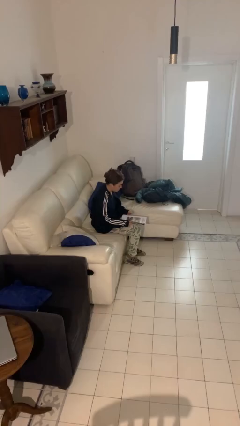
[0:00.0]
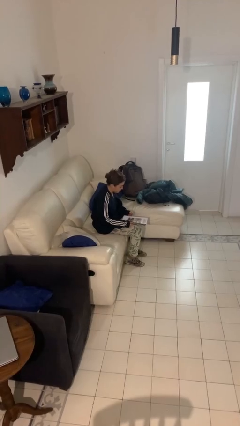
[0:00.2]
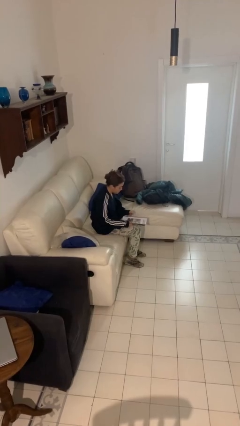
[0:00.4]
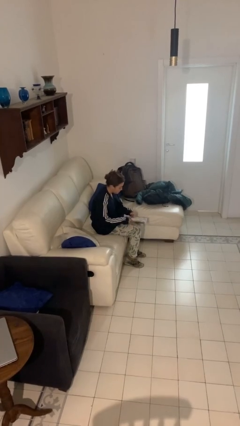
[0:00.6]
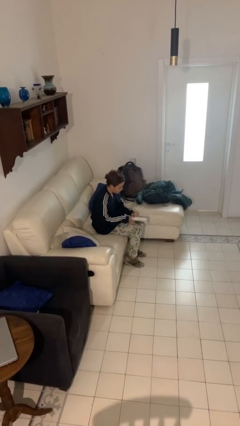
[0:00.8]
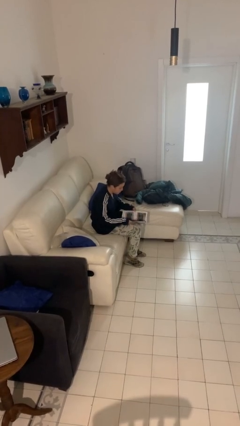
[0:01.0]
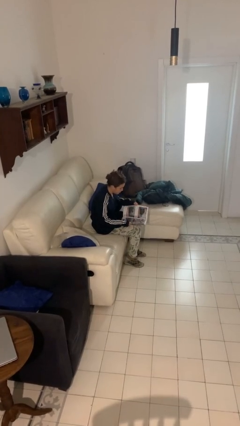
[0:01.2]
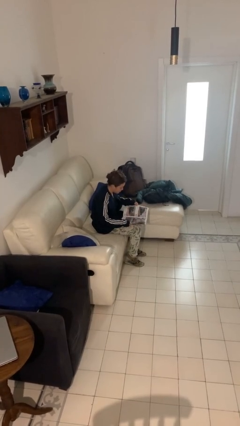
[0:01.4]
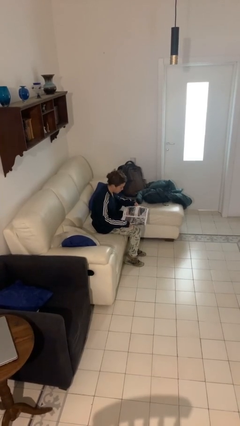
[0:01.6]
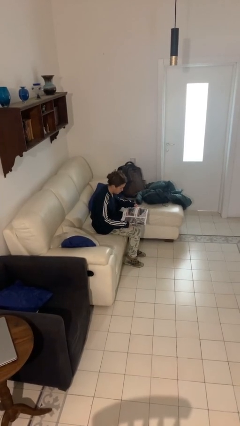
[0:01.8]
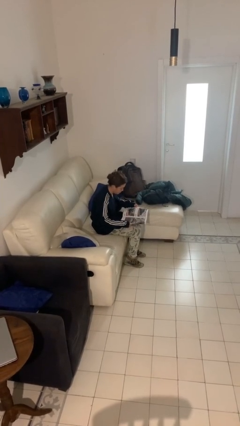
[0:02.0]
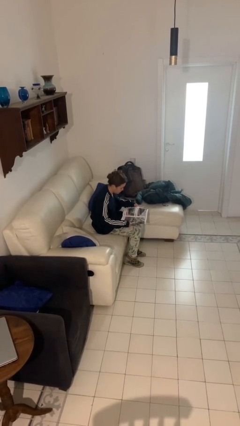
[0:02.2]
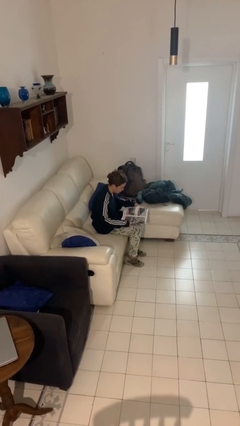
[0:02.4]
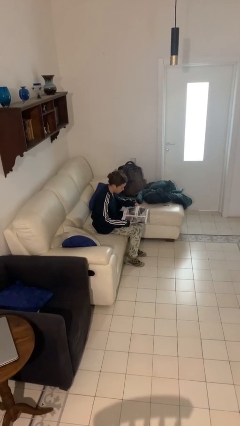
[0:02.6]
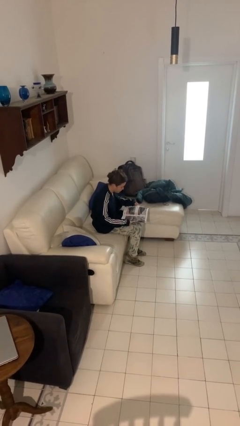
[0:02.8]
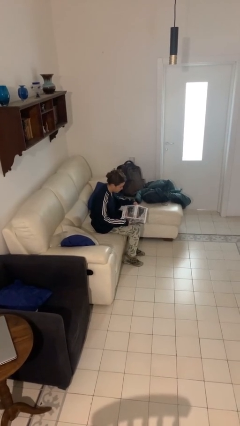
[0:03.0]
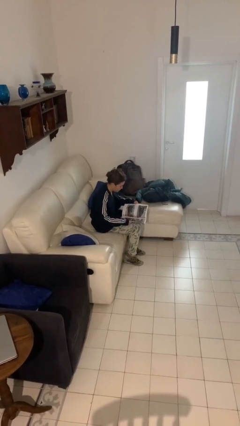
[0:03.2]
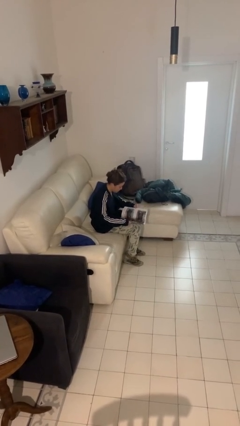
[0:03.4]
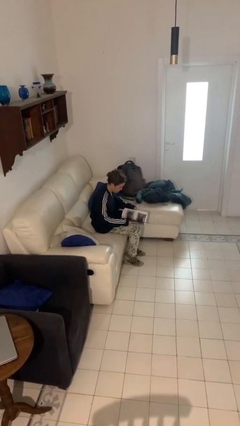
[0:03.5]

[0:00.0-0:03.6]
person reads magazine

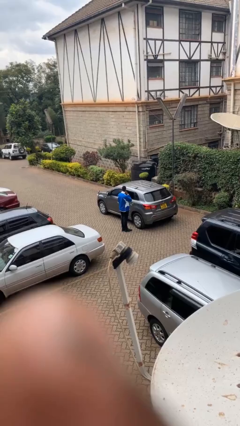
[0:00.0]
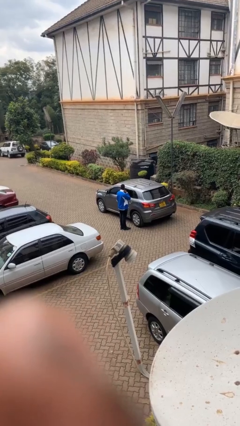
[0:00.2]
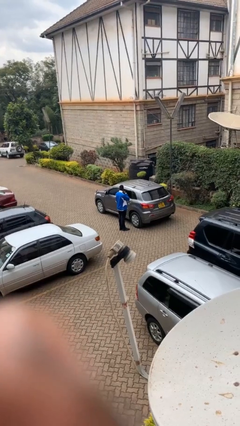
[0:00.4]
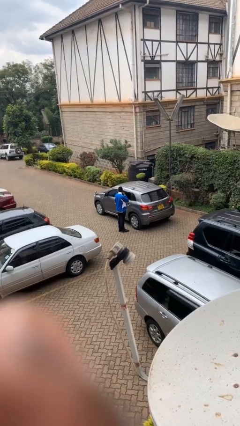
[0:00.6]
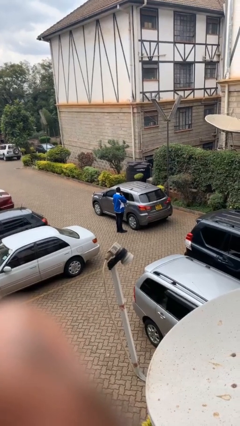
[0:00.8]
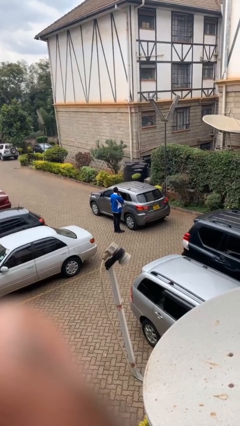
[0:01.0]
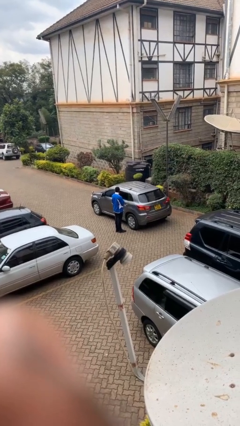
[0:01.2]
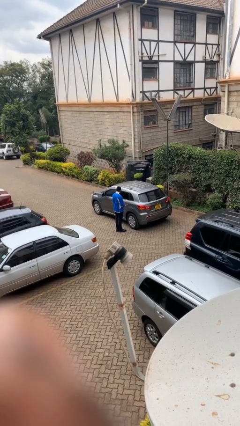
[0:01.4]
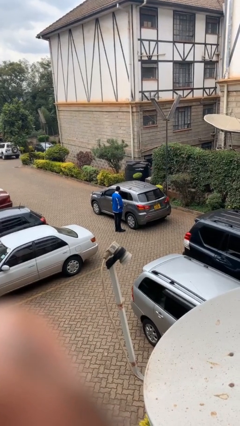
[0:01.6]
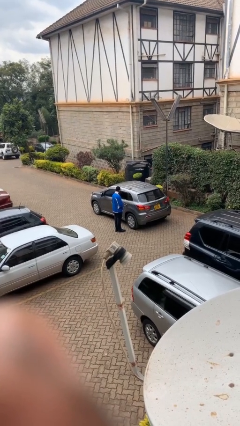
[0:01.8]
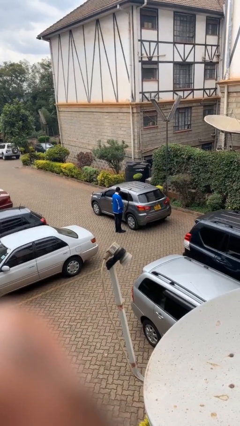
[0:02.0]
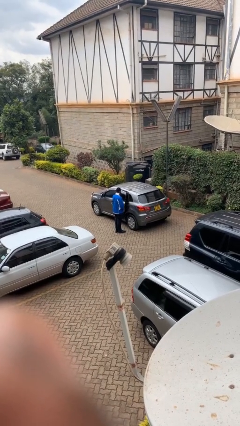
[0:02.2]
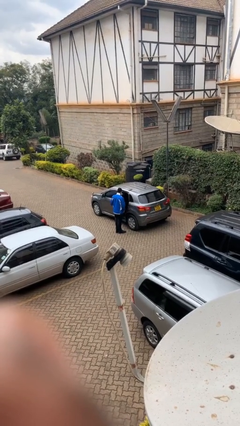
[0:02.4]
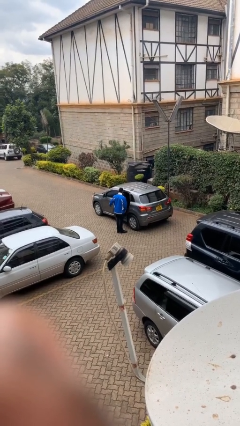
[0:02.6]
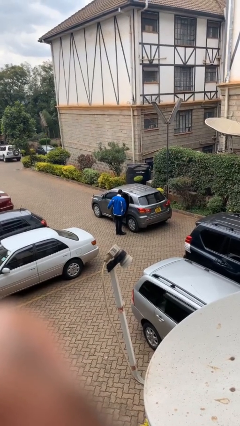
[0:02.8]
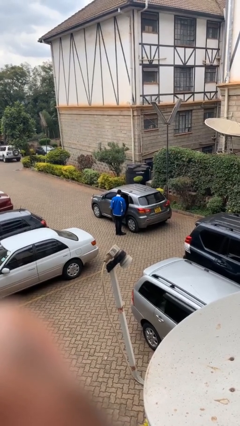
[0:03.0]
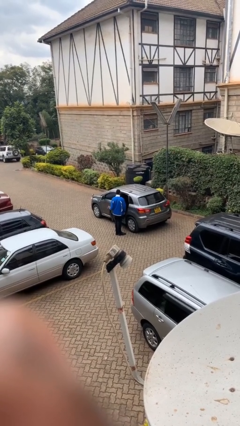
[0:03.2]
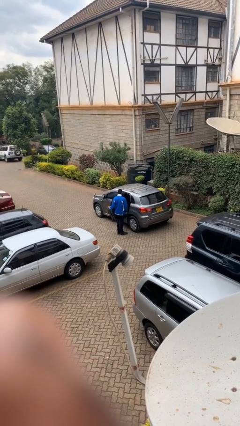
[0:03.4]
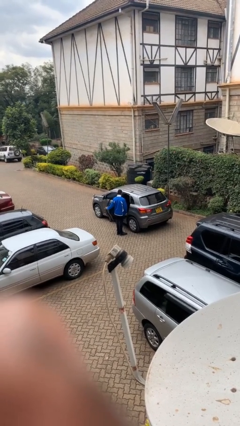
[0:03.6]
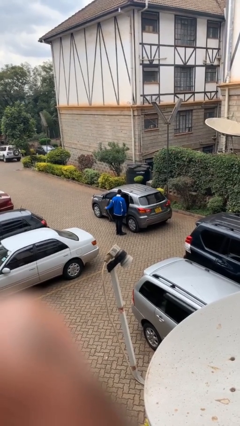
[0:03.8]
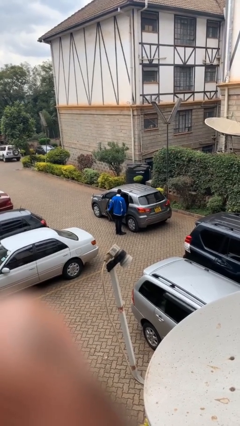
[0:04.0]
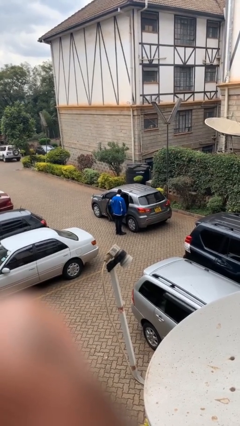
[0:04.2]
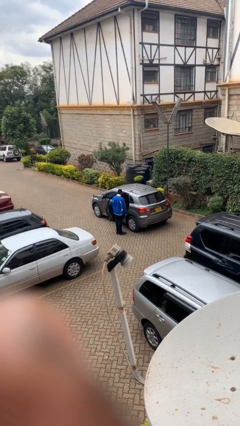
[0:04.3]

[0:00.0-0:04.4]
person opens car door

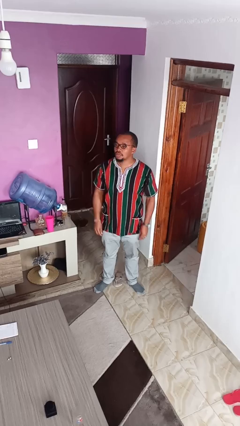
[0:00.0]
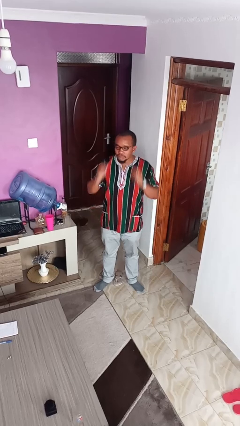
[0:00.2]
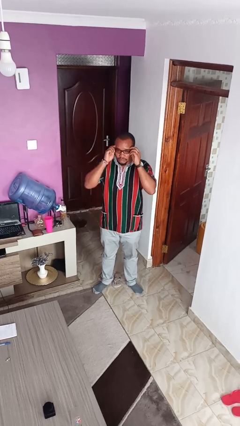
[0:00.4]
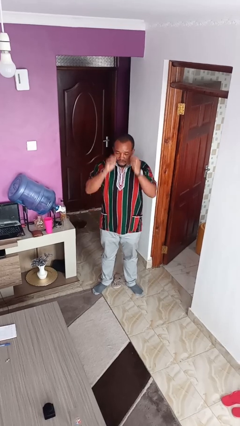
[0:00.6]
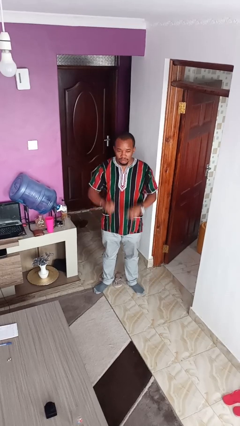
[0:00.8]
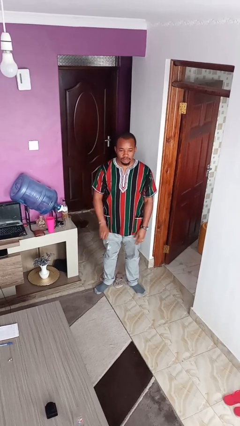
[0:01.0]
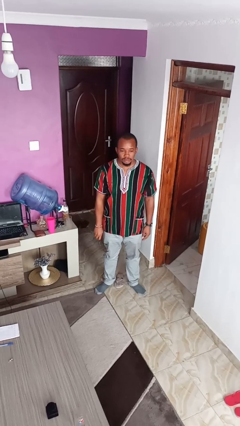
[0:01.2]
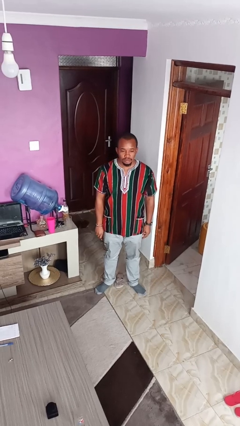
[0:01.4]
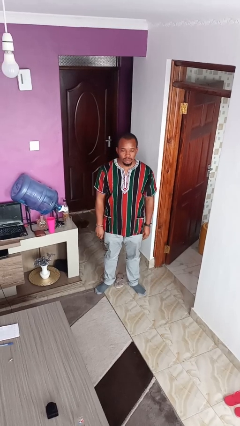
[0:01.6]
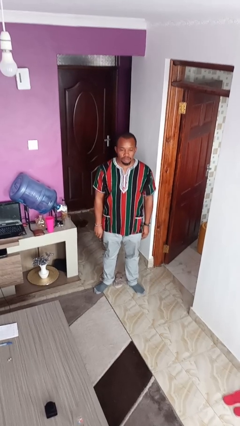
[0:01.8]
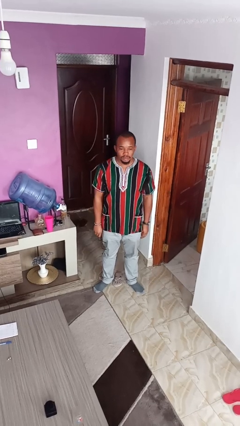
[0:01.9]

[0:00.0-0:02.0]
person takes off glasses

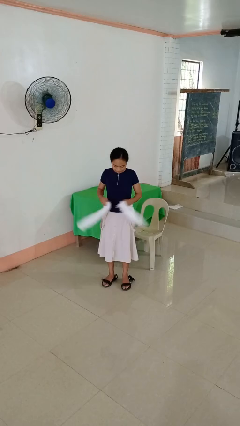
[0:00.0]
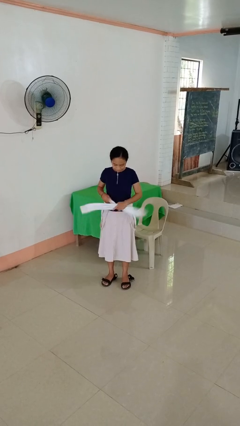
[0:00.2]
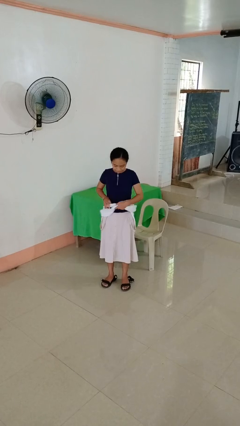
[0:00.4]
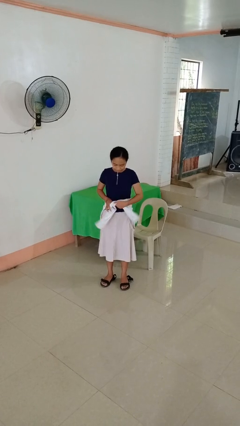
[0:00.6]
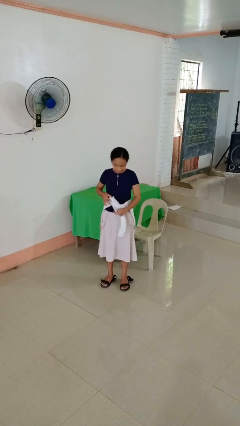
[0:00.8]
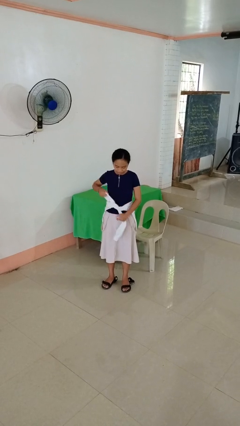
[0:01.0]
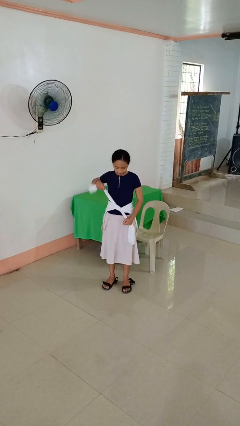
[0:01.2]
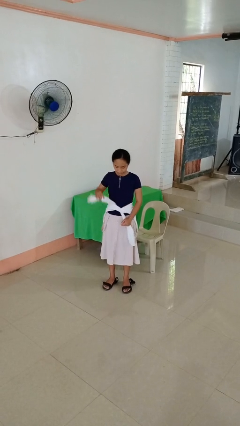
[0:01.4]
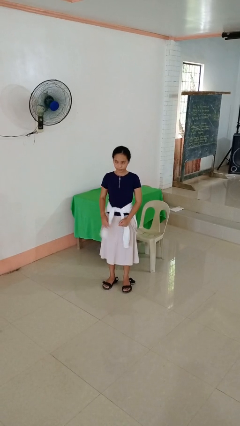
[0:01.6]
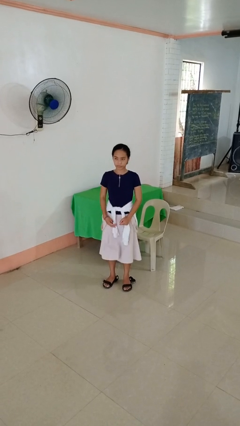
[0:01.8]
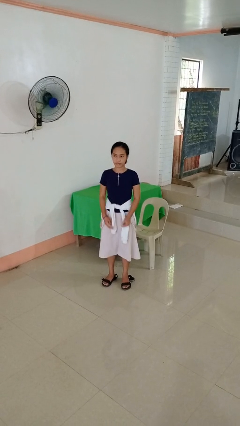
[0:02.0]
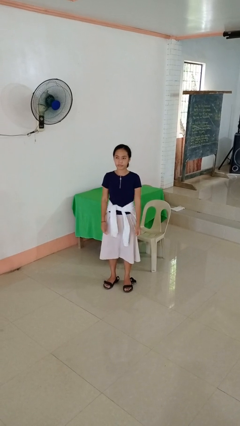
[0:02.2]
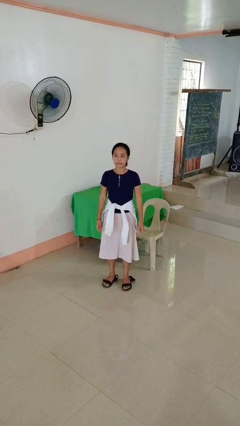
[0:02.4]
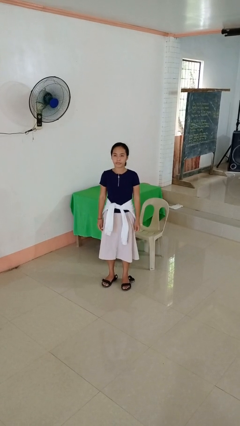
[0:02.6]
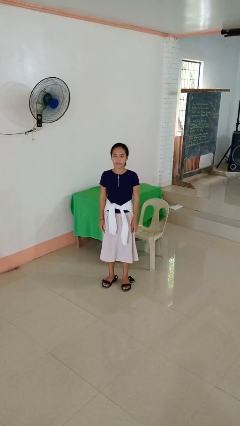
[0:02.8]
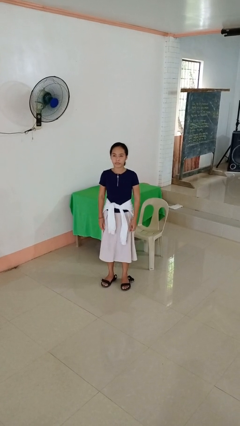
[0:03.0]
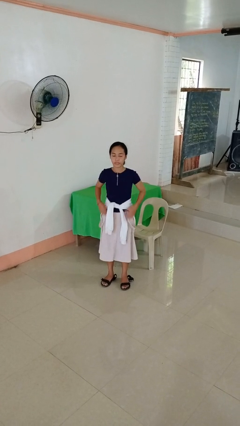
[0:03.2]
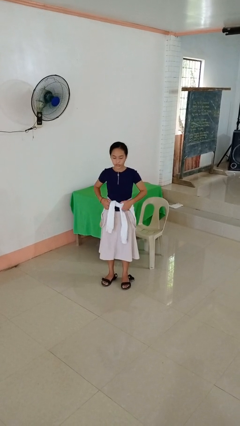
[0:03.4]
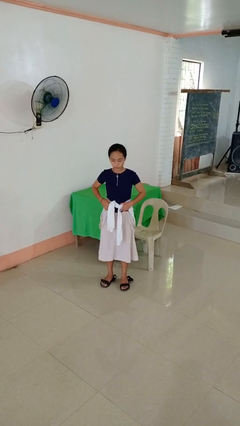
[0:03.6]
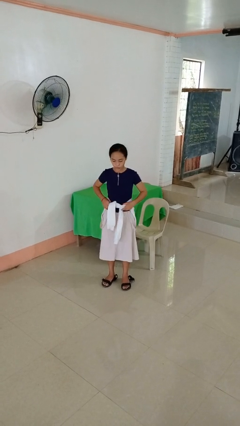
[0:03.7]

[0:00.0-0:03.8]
person ties jacket around waist

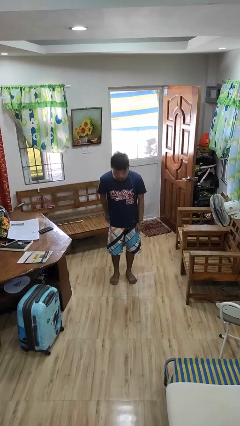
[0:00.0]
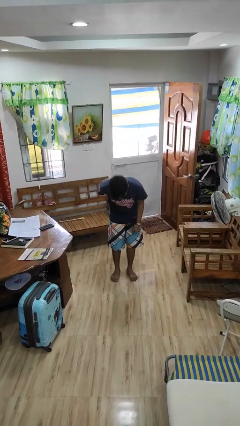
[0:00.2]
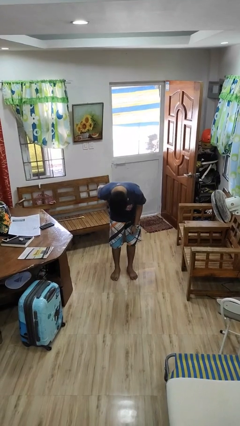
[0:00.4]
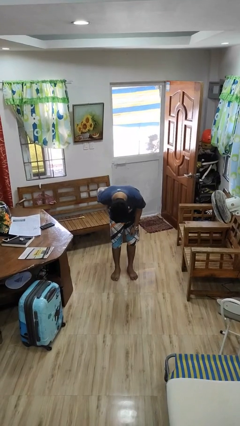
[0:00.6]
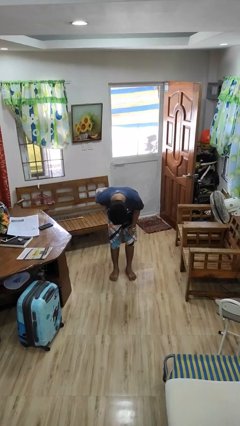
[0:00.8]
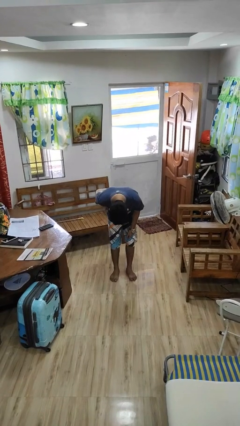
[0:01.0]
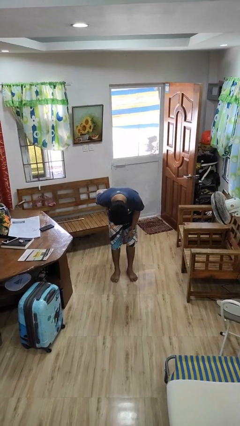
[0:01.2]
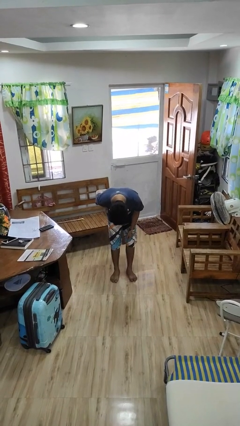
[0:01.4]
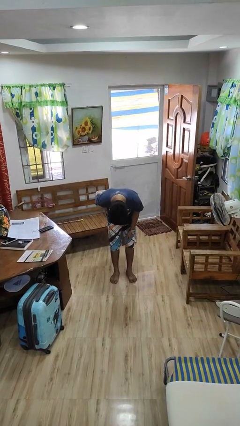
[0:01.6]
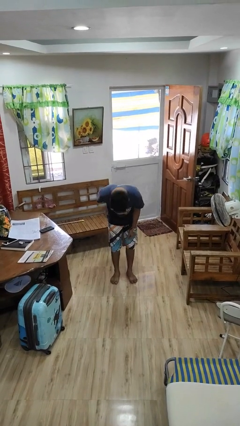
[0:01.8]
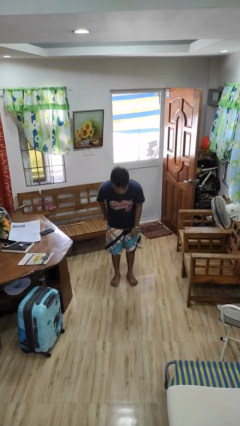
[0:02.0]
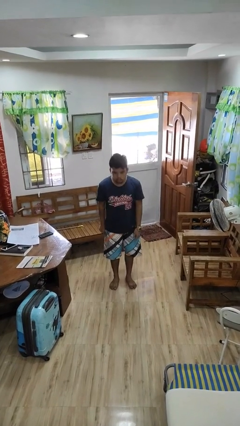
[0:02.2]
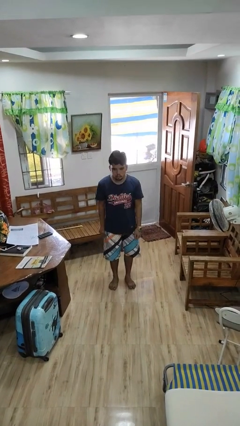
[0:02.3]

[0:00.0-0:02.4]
person bows

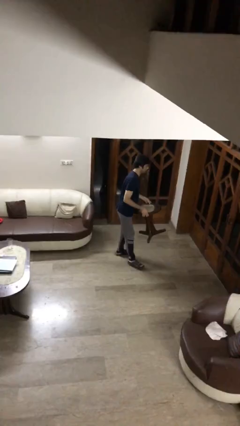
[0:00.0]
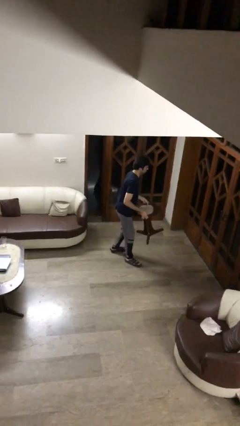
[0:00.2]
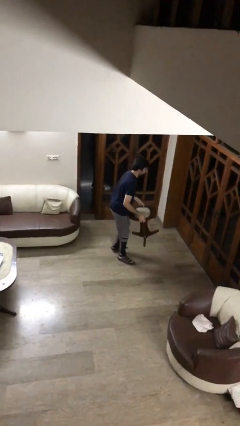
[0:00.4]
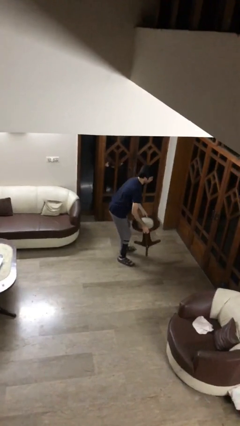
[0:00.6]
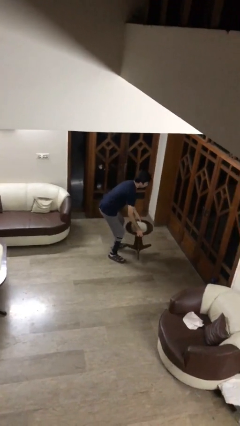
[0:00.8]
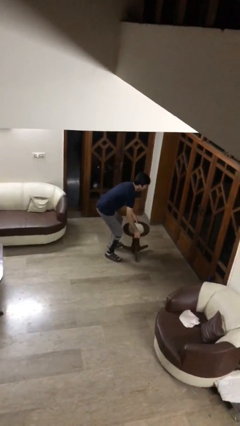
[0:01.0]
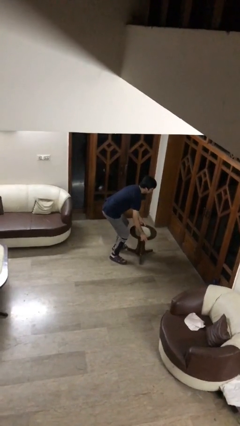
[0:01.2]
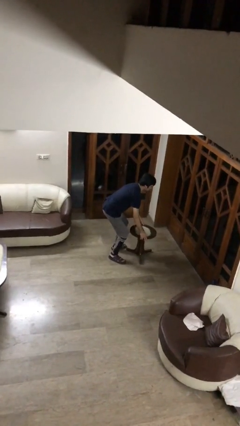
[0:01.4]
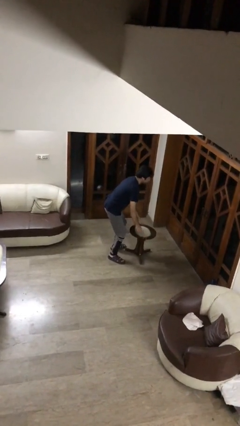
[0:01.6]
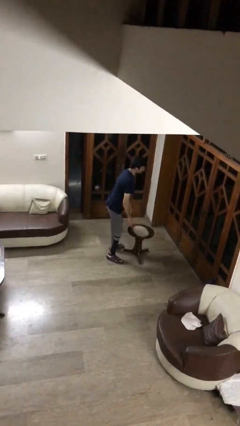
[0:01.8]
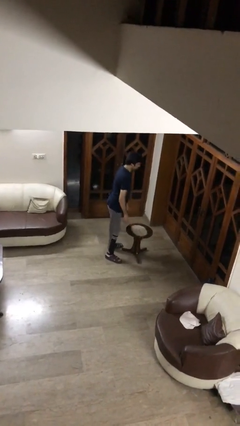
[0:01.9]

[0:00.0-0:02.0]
person puts down object on floor
